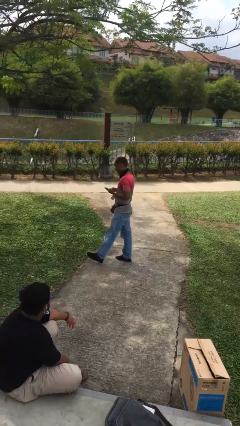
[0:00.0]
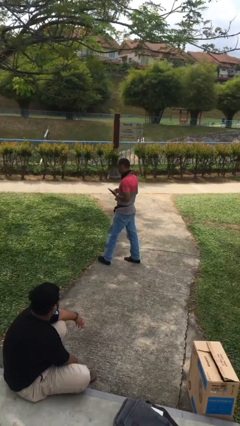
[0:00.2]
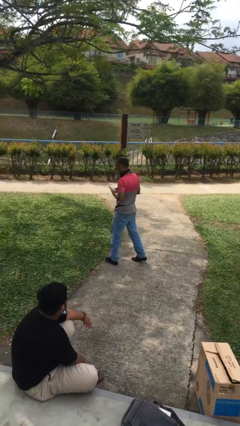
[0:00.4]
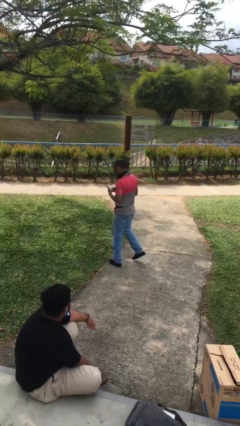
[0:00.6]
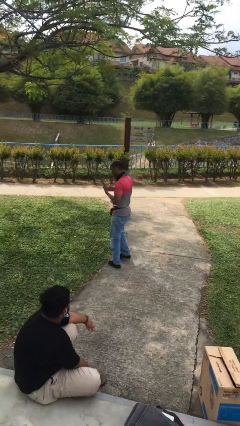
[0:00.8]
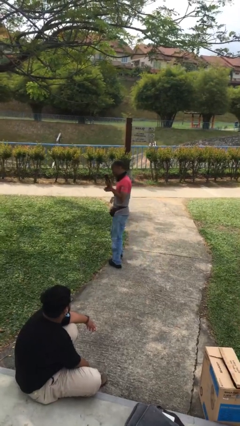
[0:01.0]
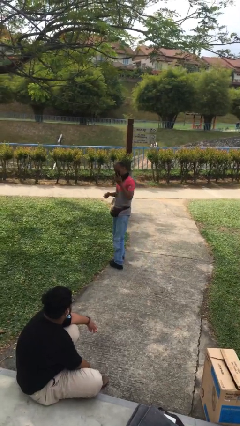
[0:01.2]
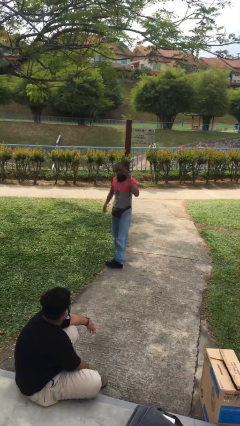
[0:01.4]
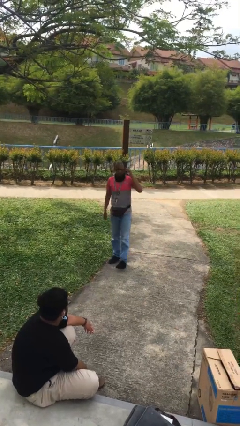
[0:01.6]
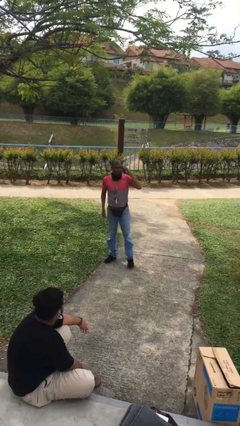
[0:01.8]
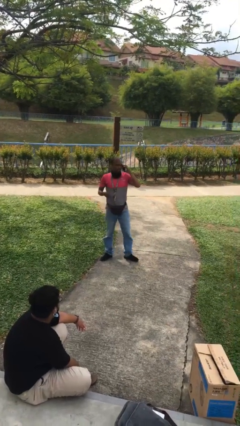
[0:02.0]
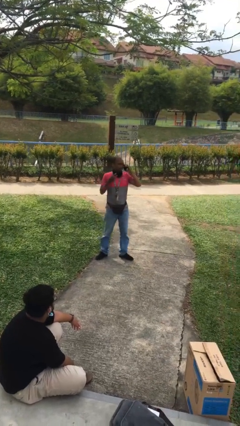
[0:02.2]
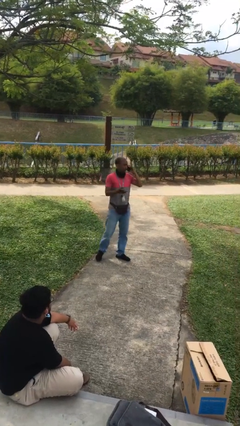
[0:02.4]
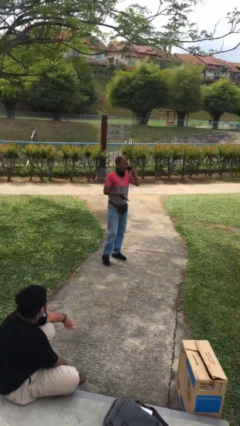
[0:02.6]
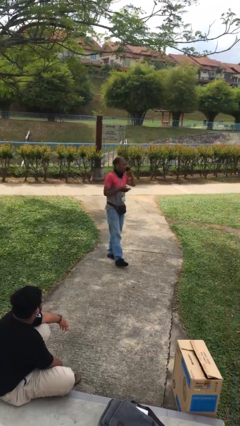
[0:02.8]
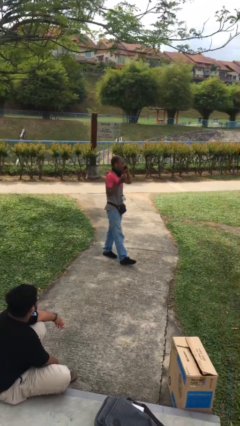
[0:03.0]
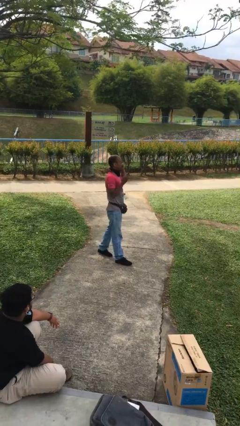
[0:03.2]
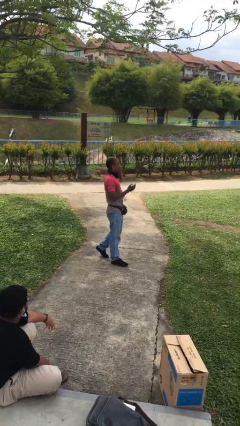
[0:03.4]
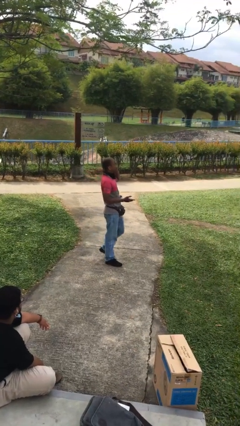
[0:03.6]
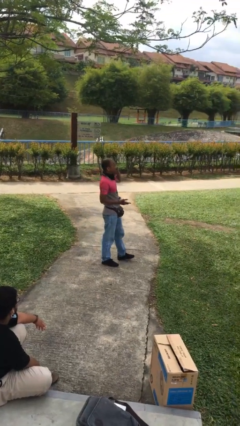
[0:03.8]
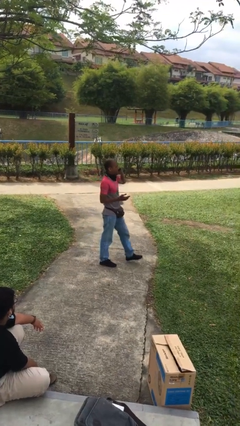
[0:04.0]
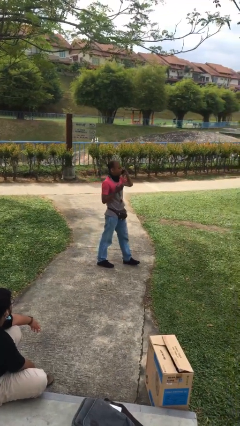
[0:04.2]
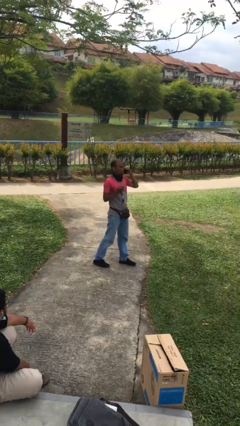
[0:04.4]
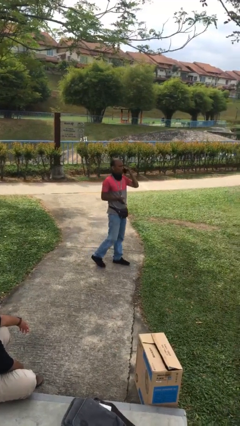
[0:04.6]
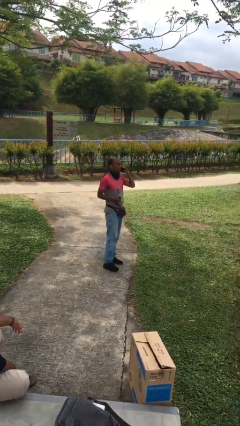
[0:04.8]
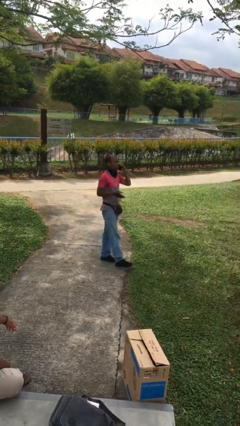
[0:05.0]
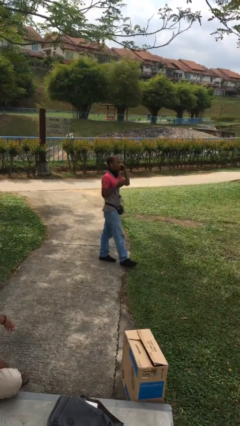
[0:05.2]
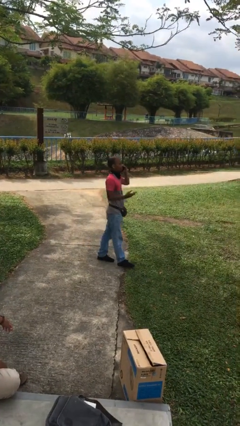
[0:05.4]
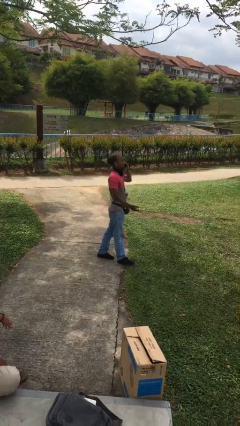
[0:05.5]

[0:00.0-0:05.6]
person talks on phone

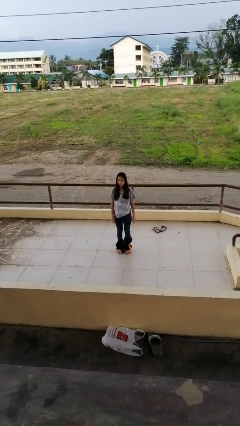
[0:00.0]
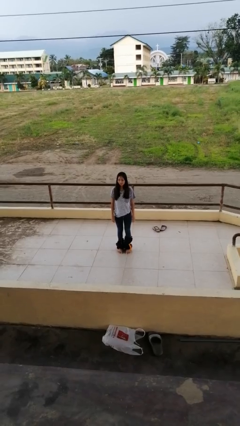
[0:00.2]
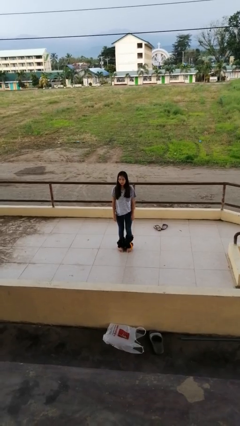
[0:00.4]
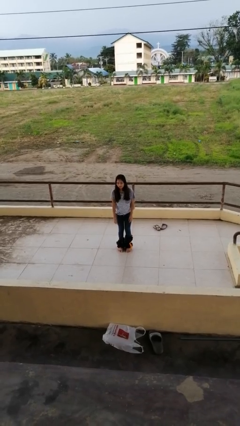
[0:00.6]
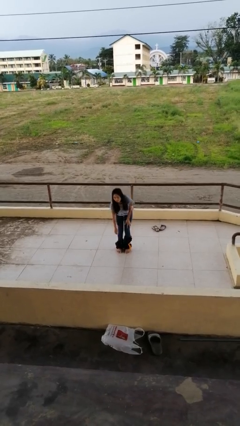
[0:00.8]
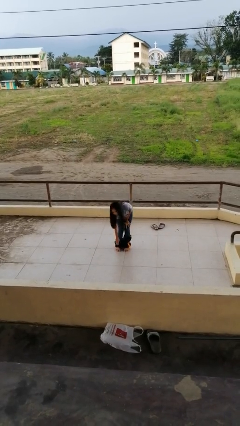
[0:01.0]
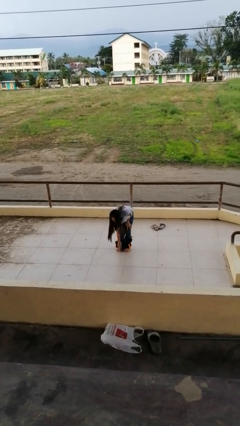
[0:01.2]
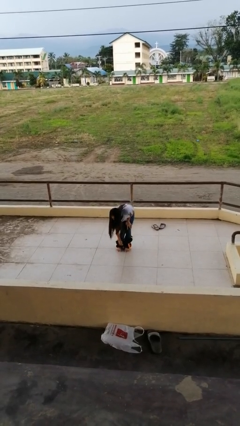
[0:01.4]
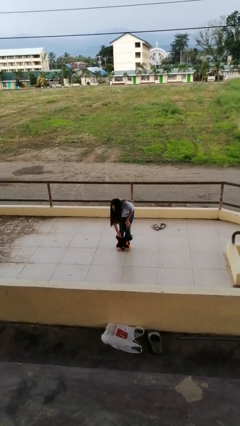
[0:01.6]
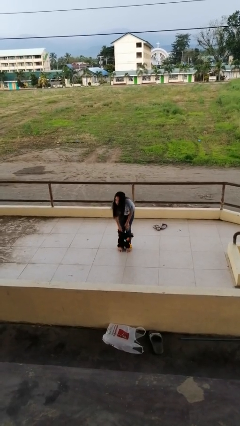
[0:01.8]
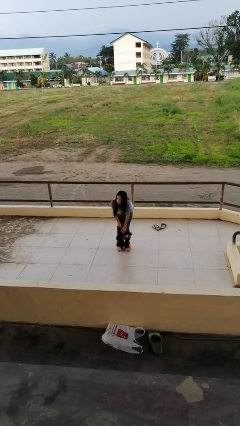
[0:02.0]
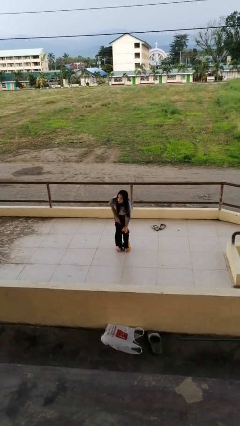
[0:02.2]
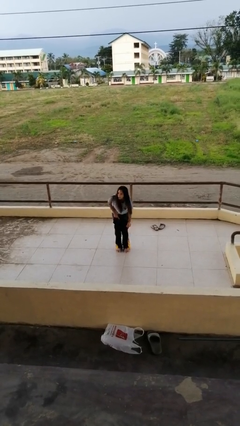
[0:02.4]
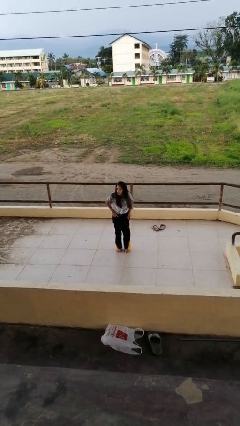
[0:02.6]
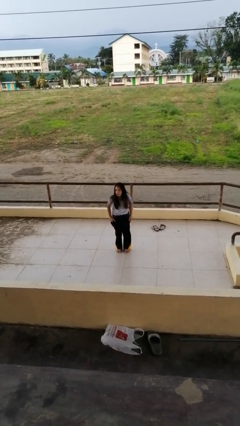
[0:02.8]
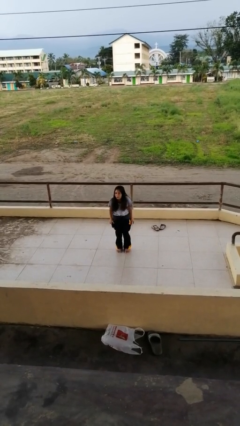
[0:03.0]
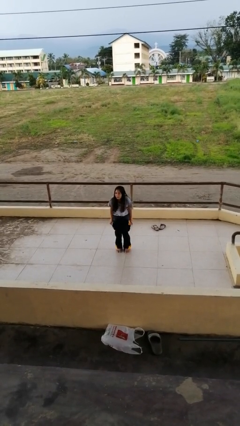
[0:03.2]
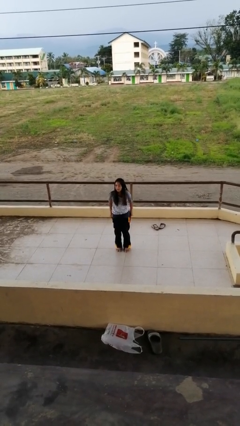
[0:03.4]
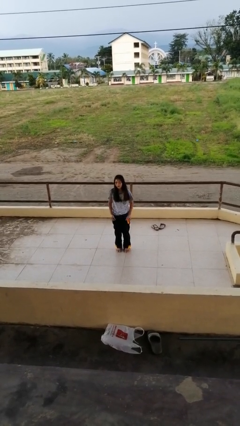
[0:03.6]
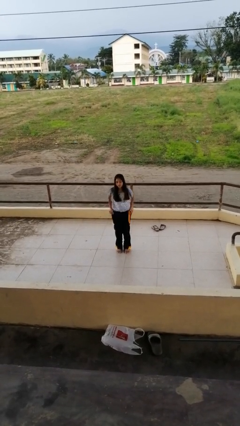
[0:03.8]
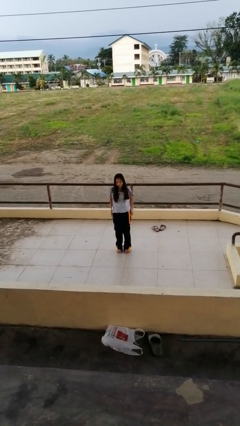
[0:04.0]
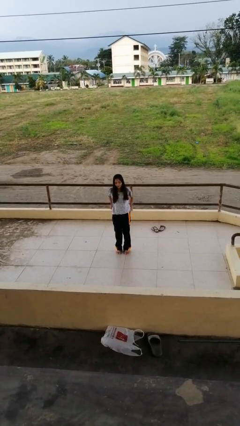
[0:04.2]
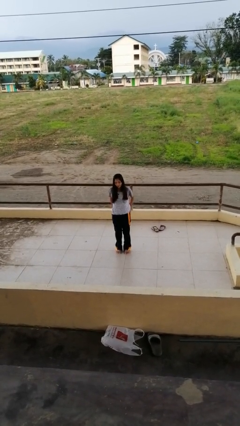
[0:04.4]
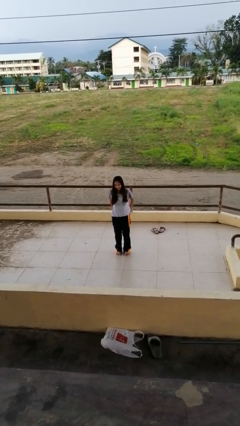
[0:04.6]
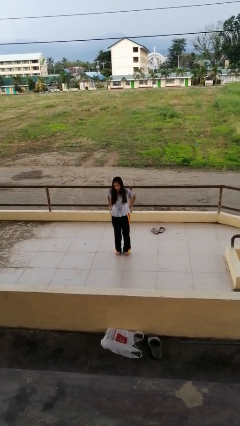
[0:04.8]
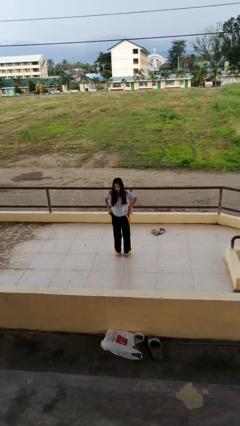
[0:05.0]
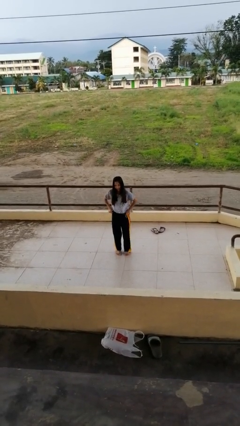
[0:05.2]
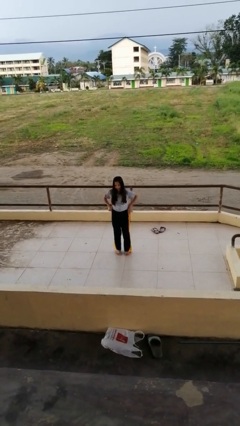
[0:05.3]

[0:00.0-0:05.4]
person puts on pants

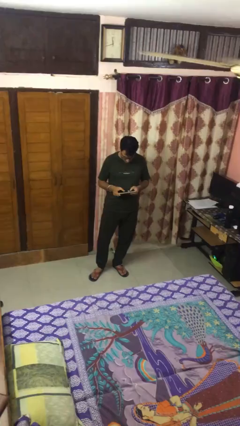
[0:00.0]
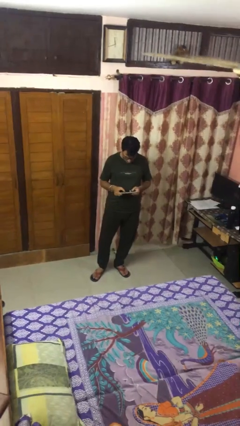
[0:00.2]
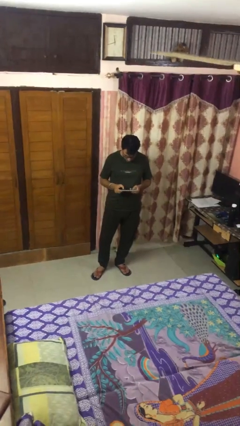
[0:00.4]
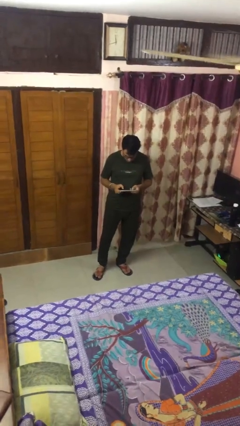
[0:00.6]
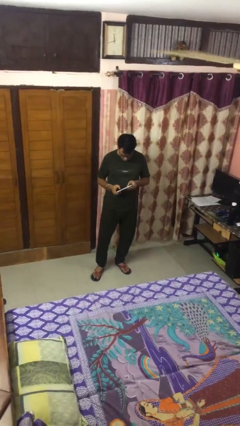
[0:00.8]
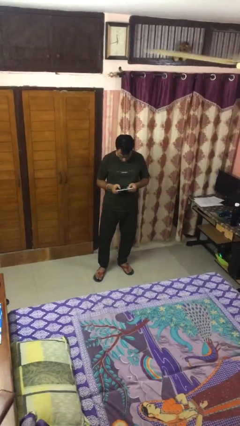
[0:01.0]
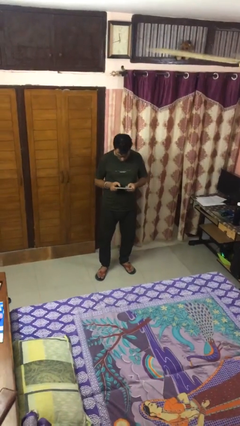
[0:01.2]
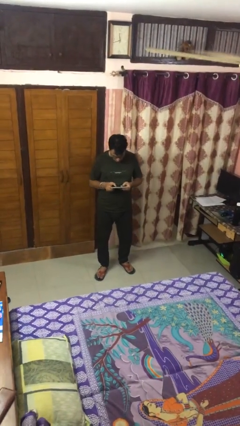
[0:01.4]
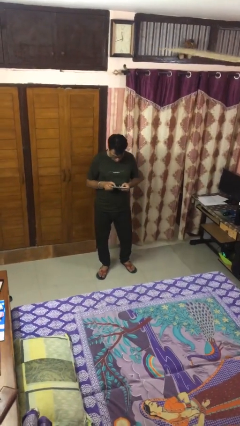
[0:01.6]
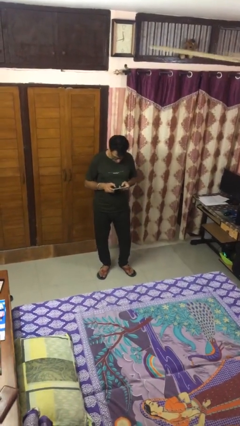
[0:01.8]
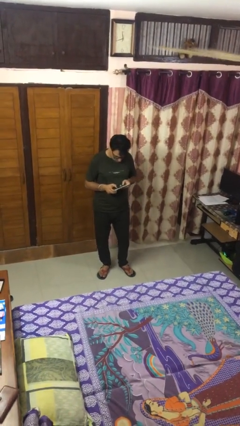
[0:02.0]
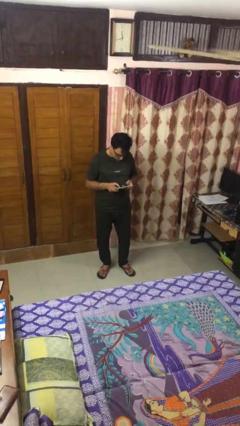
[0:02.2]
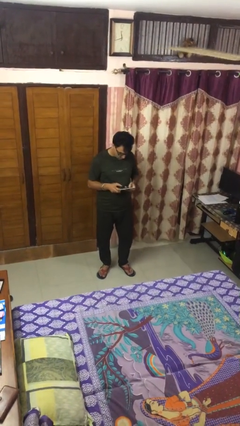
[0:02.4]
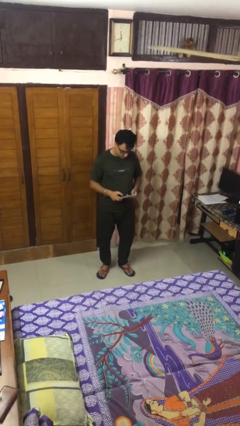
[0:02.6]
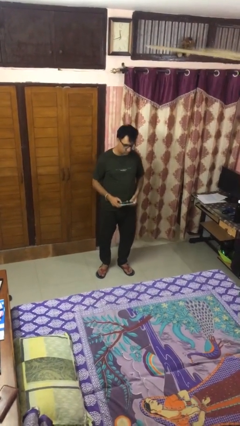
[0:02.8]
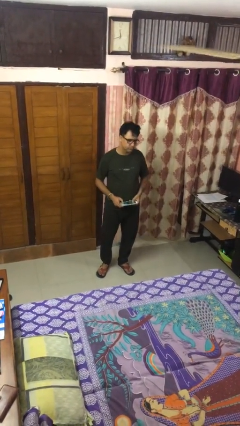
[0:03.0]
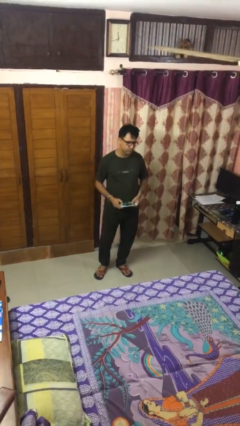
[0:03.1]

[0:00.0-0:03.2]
person interacts with handheld game

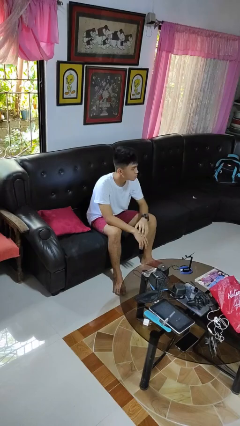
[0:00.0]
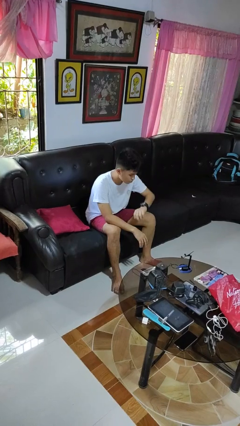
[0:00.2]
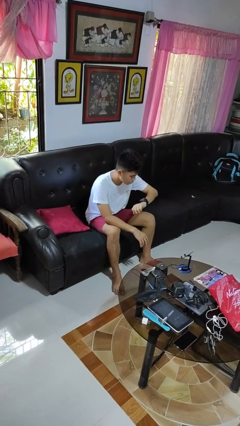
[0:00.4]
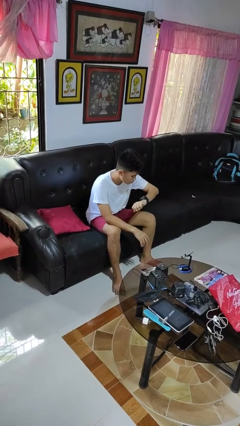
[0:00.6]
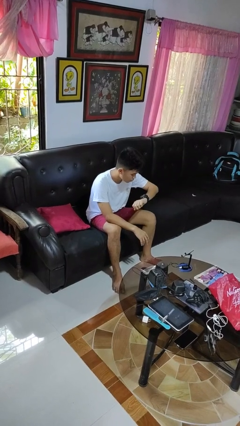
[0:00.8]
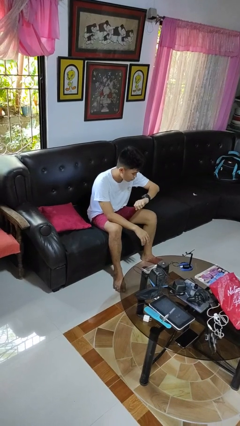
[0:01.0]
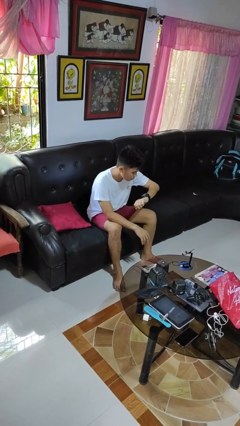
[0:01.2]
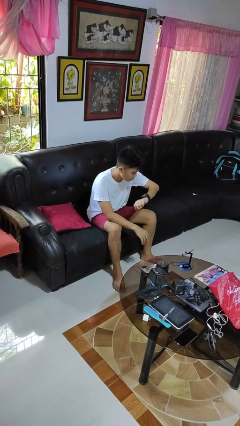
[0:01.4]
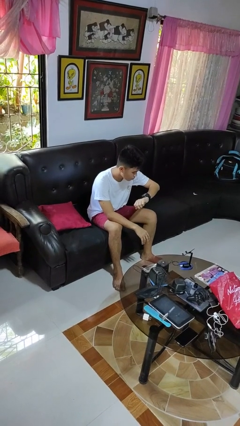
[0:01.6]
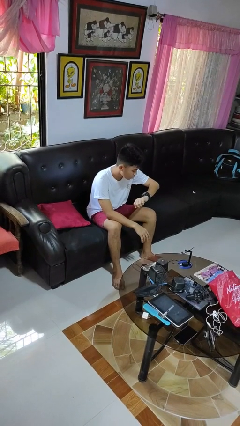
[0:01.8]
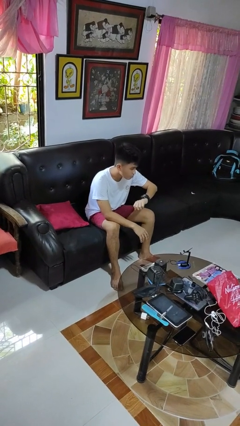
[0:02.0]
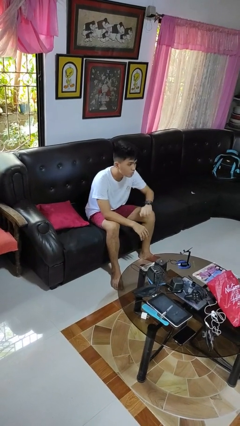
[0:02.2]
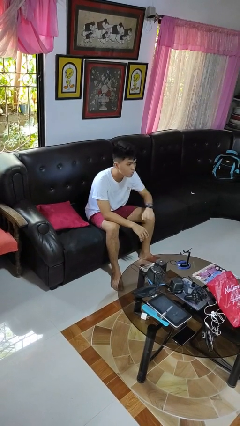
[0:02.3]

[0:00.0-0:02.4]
person looks at wristwatch

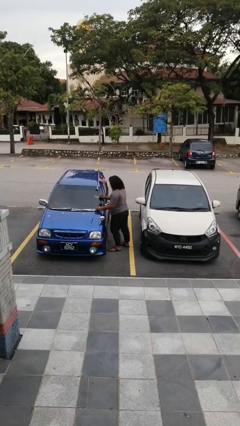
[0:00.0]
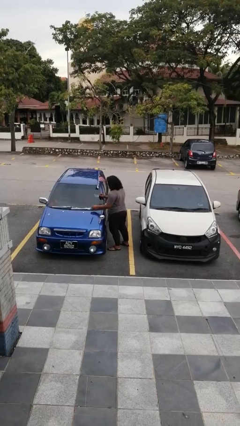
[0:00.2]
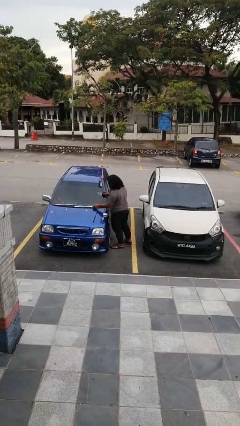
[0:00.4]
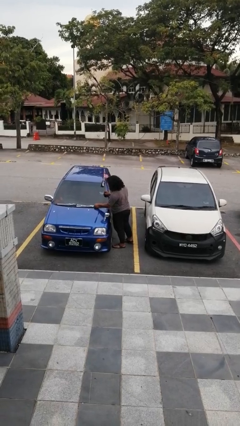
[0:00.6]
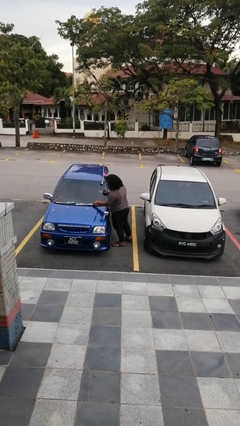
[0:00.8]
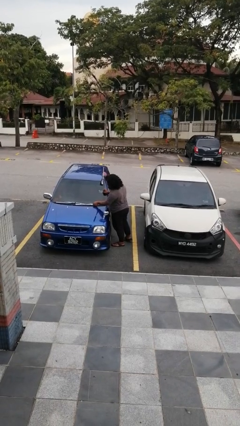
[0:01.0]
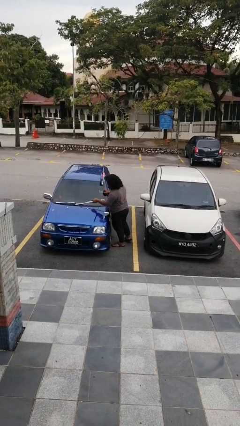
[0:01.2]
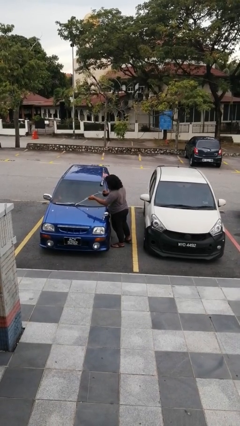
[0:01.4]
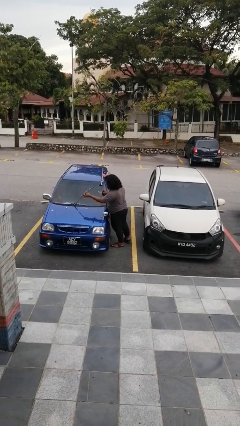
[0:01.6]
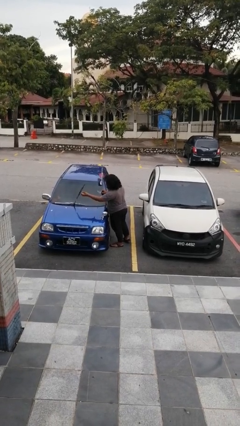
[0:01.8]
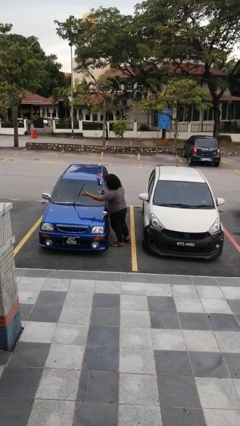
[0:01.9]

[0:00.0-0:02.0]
person flips up car wipers
